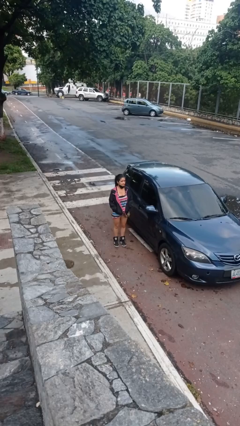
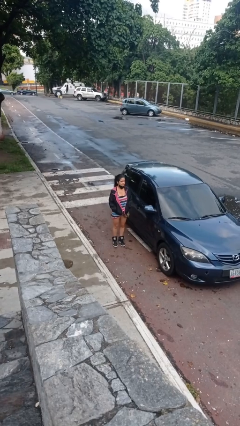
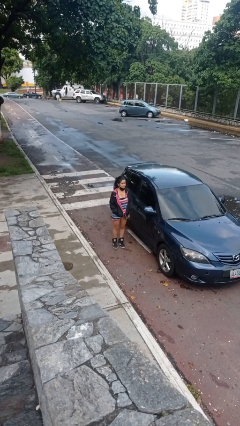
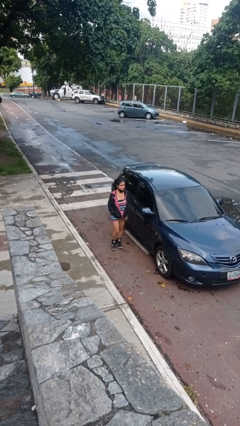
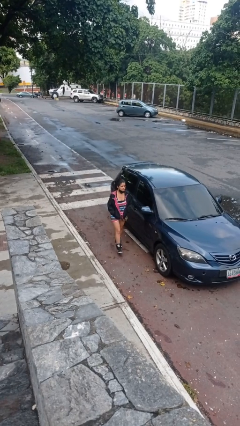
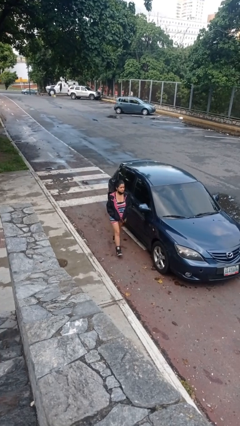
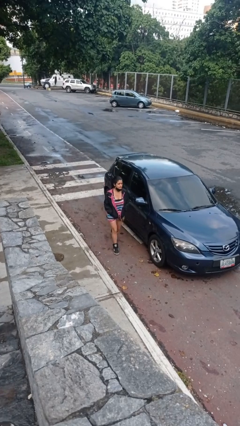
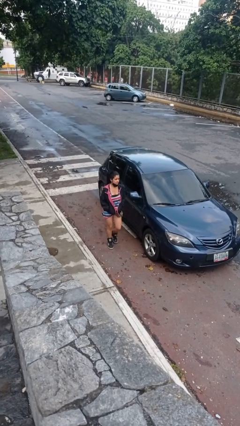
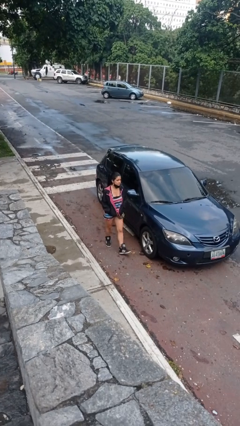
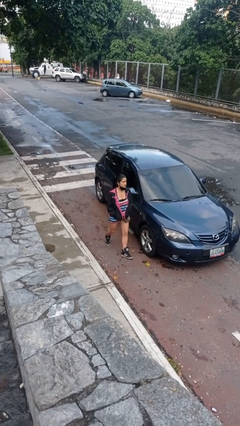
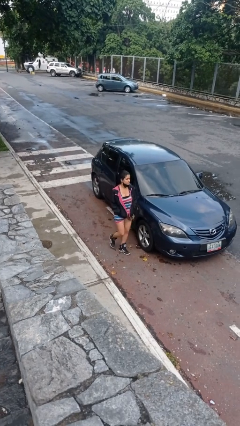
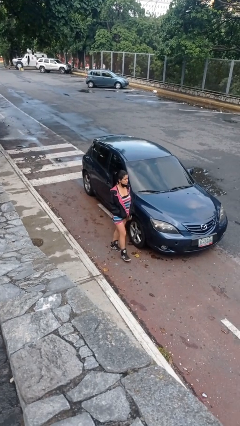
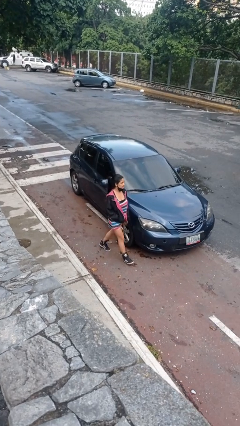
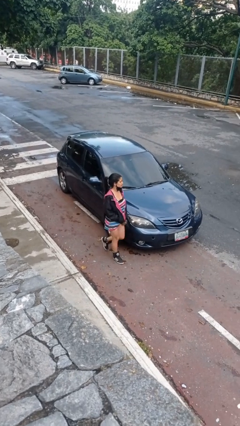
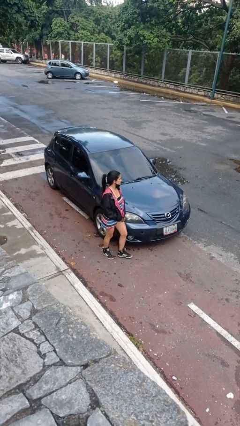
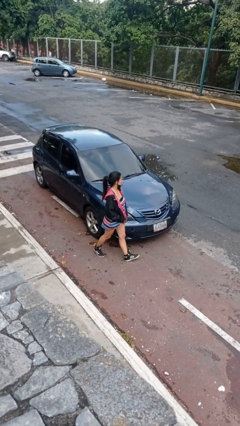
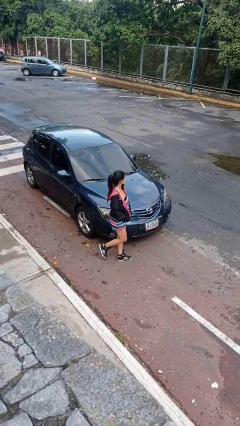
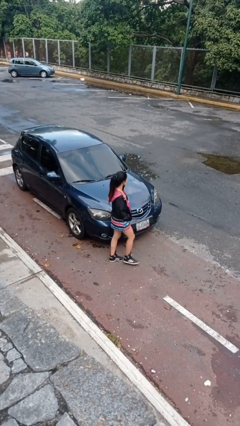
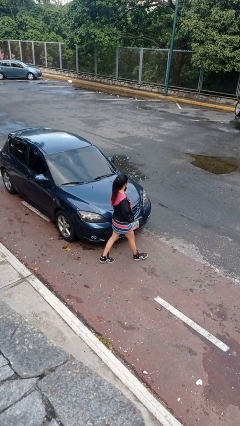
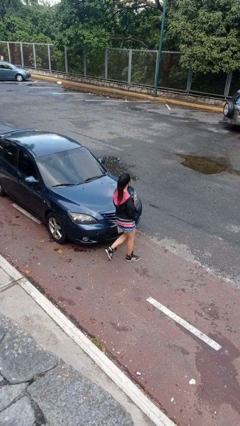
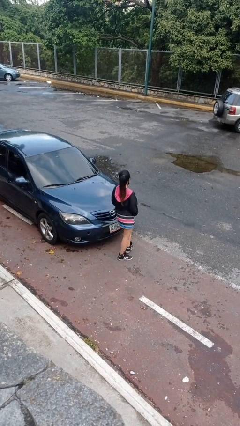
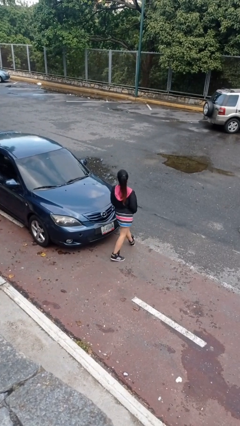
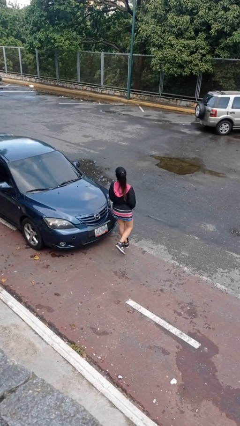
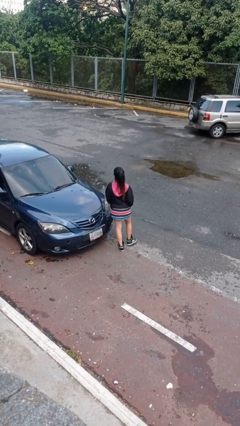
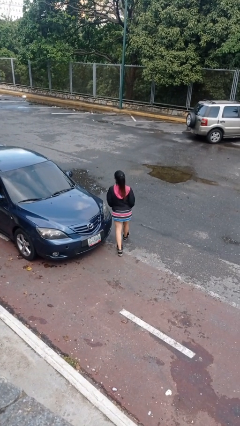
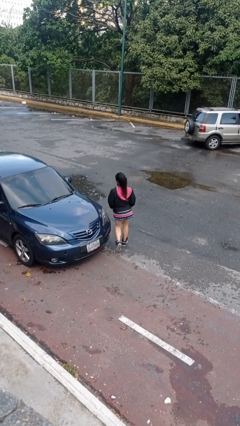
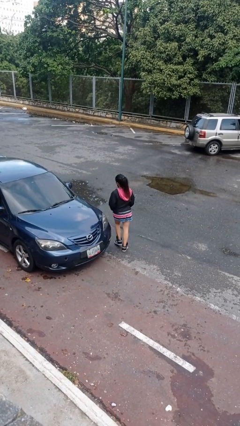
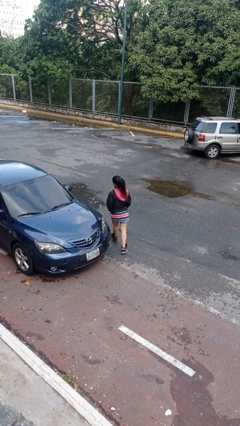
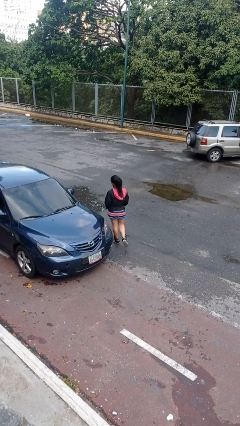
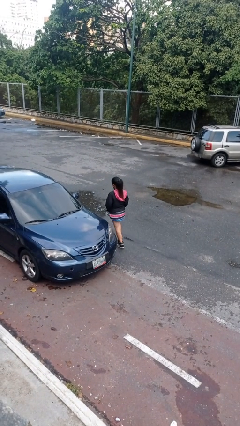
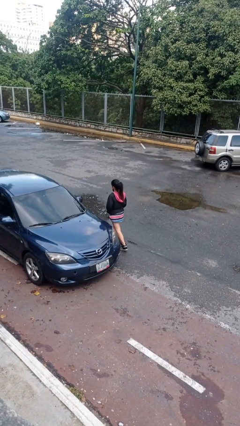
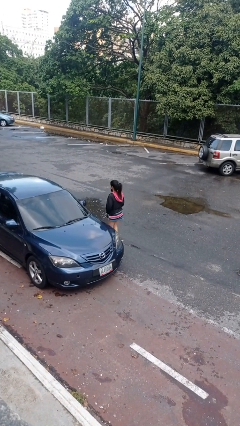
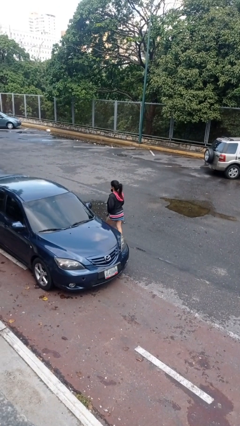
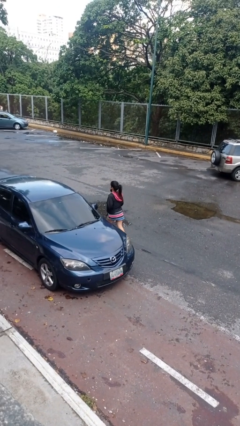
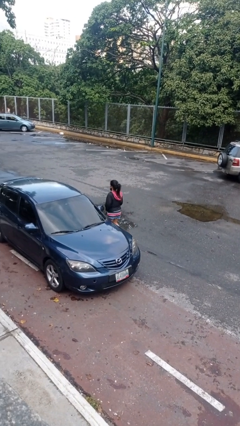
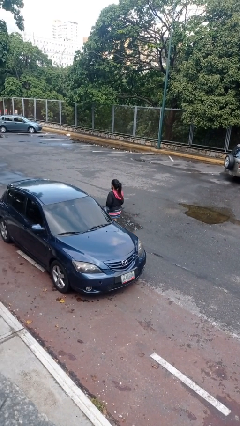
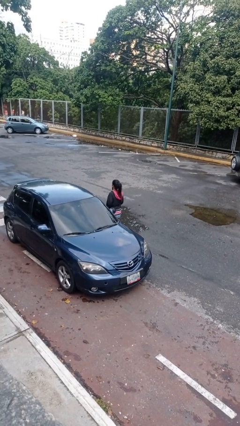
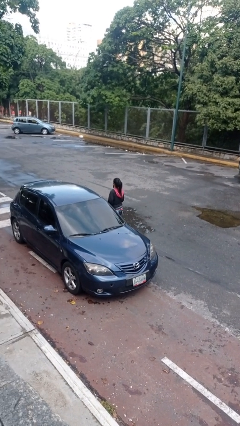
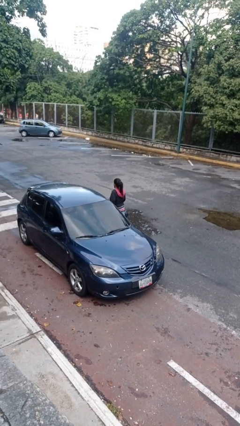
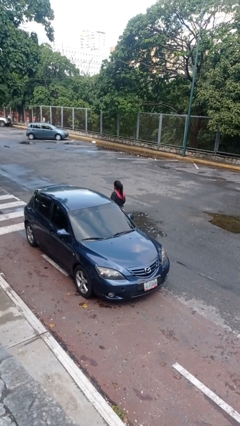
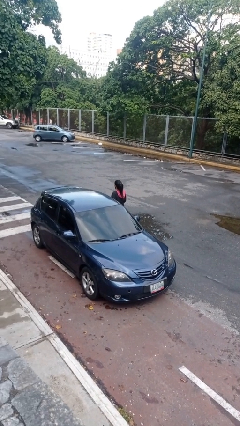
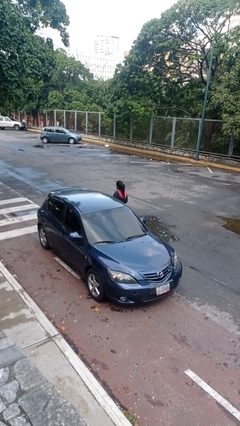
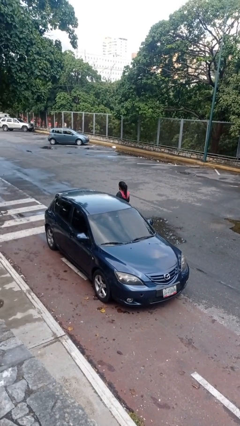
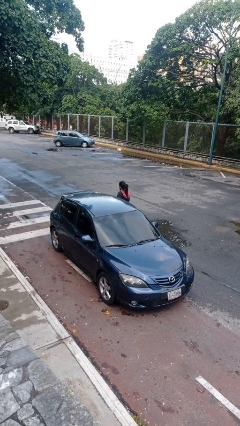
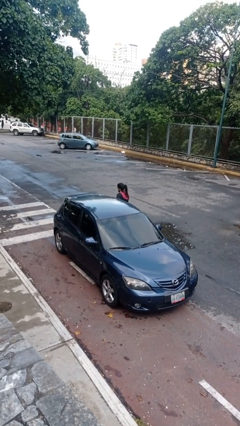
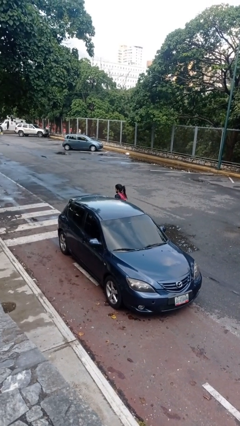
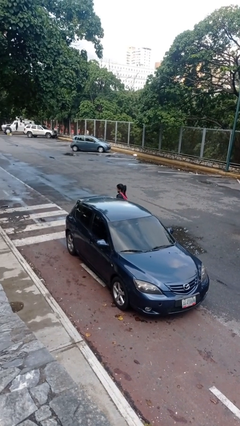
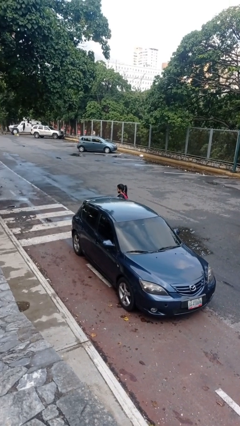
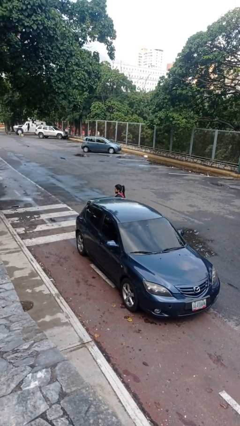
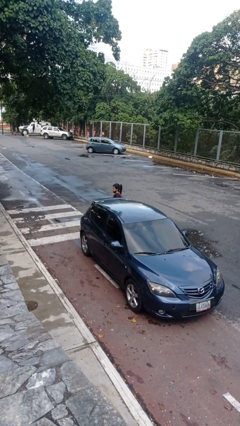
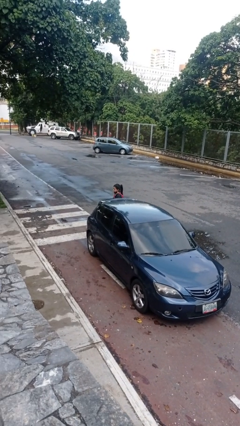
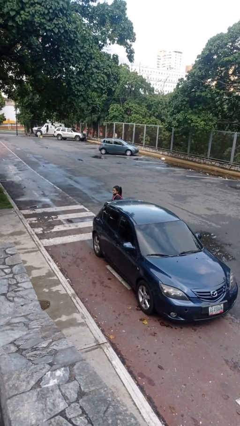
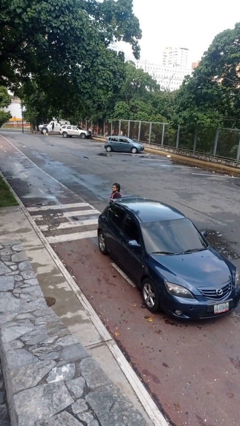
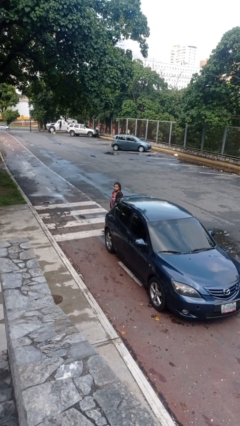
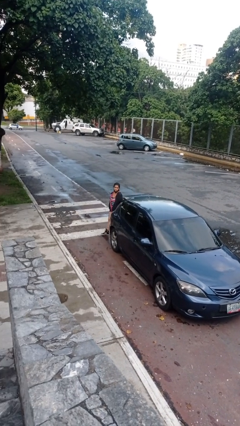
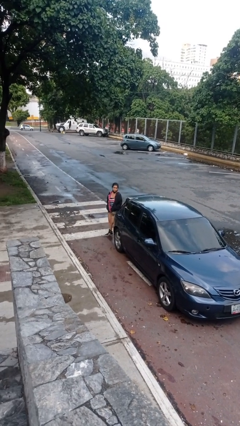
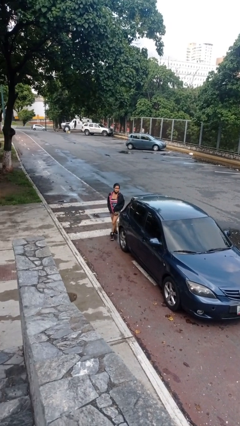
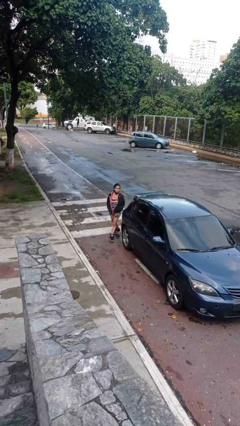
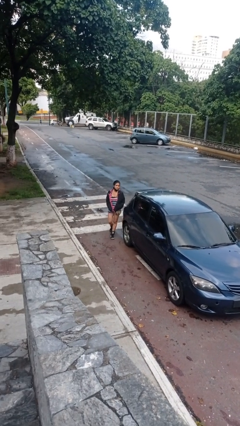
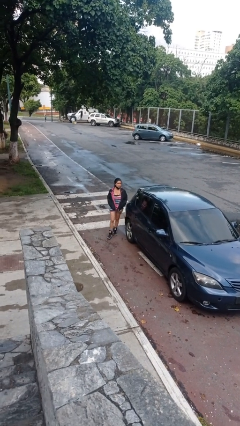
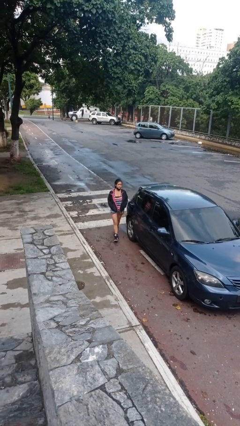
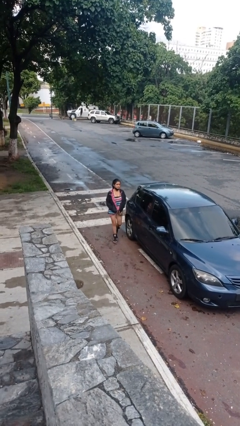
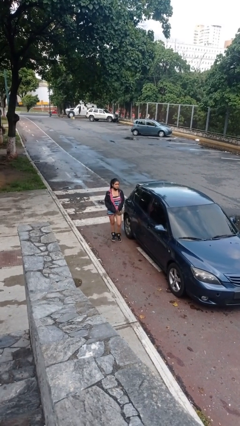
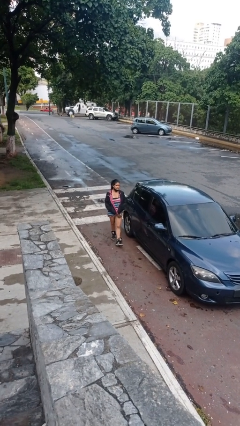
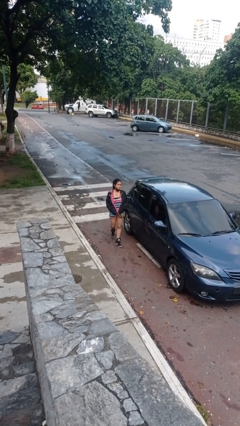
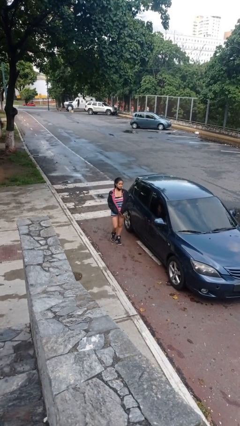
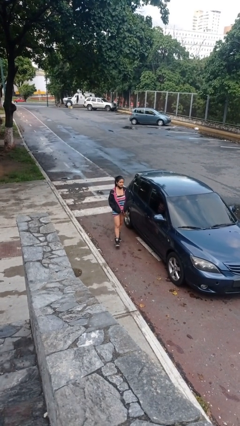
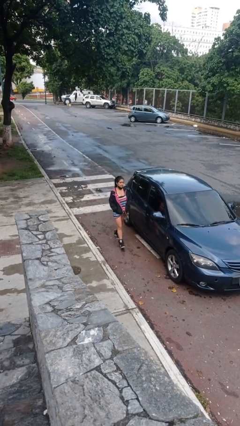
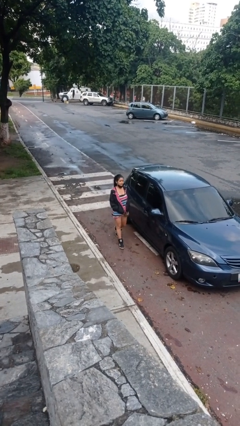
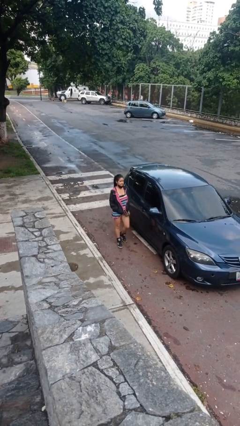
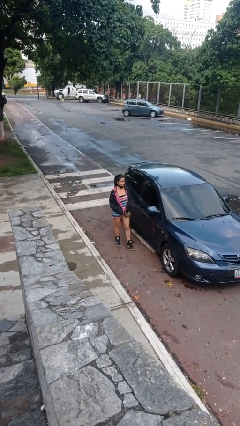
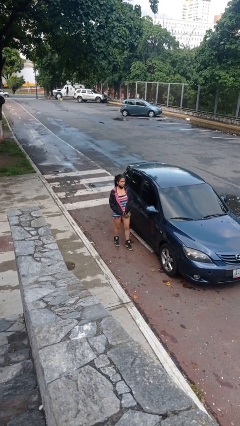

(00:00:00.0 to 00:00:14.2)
person walks around car

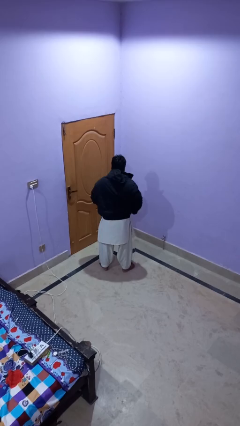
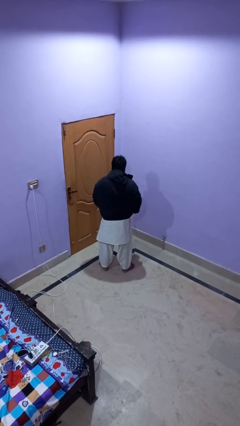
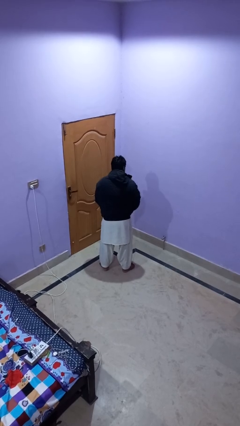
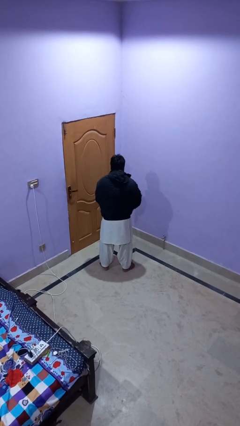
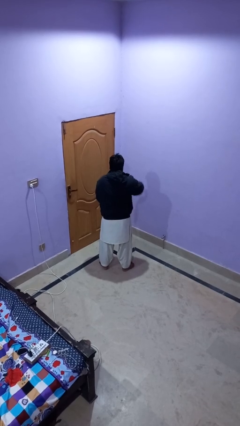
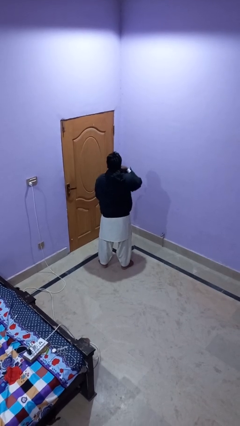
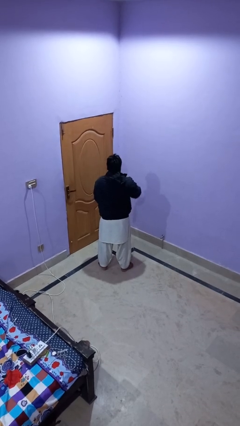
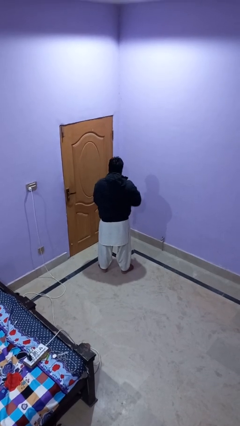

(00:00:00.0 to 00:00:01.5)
person zips up jacket

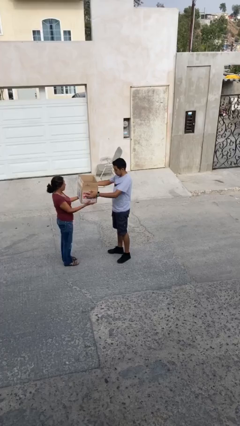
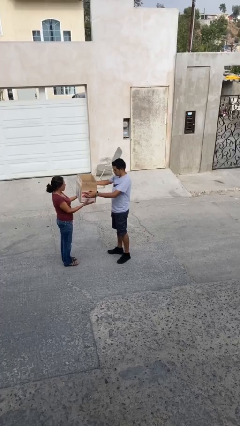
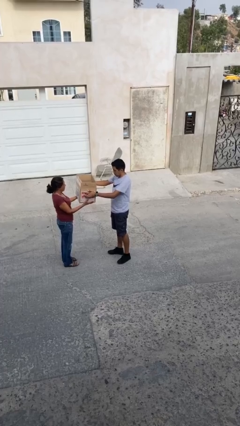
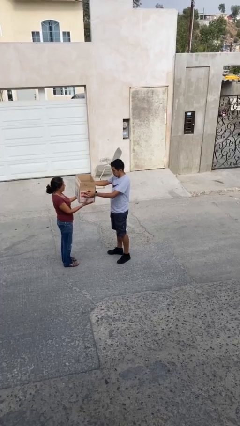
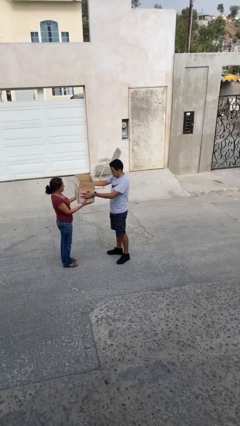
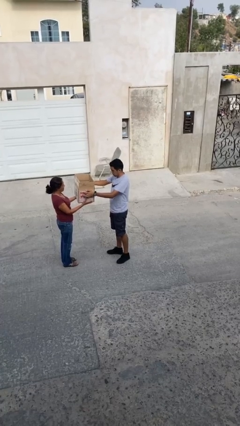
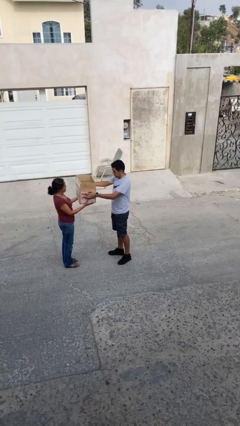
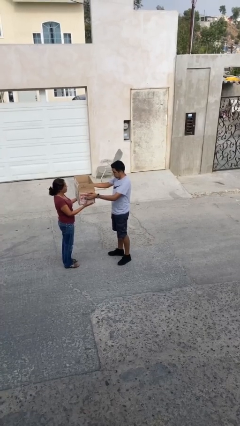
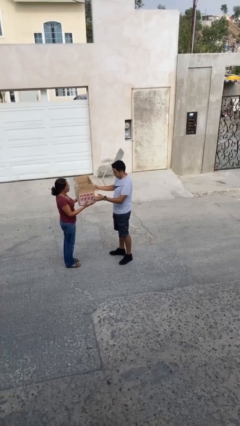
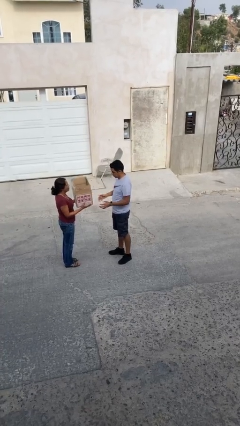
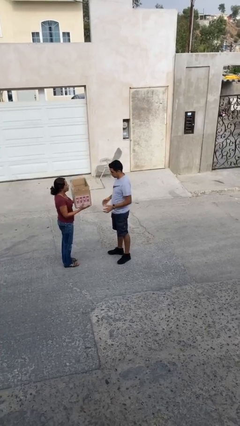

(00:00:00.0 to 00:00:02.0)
person transfers object to person

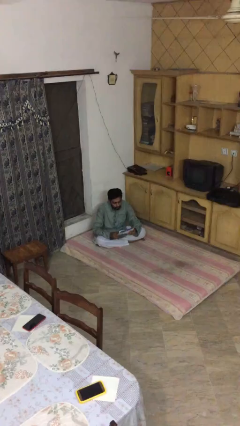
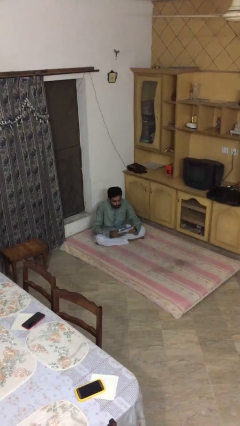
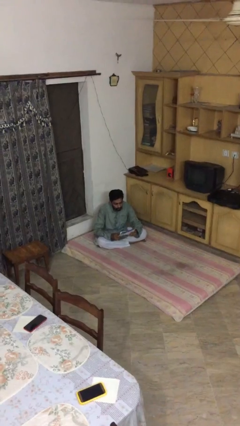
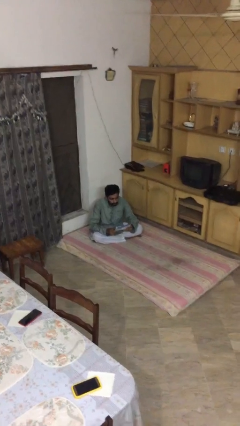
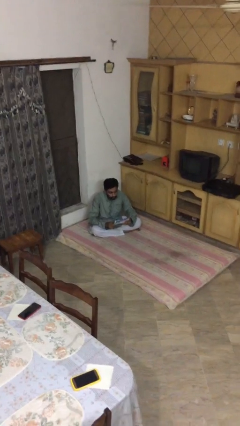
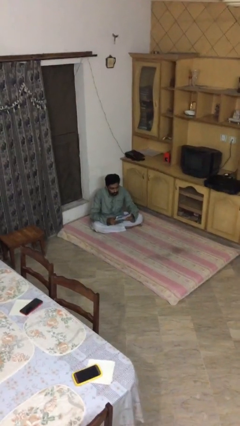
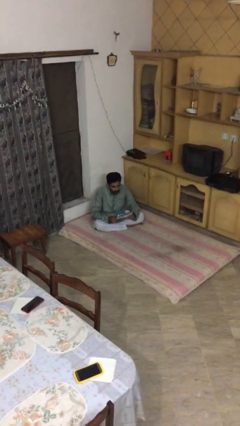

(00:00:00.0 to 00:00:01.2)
person reads document
